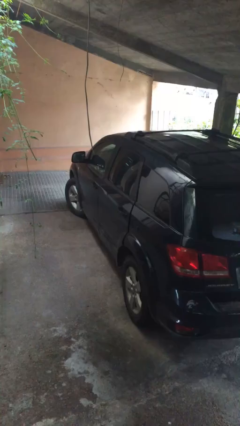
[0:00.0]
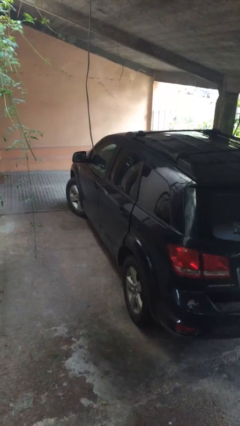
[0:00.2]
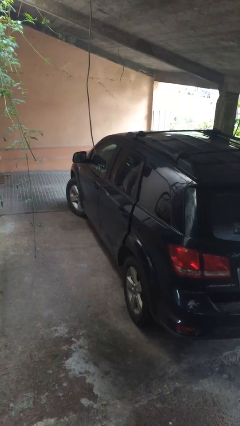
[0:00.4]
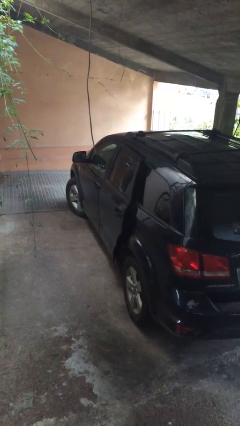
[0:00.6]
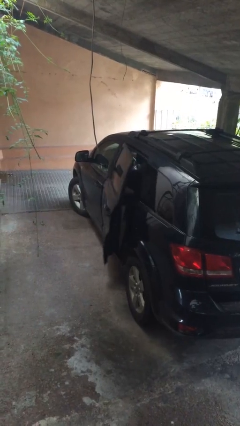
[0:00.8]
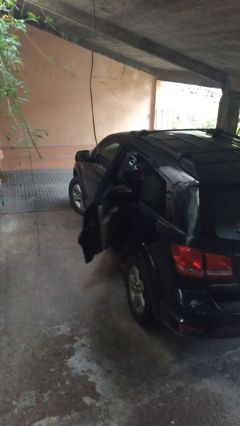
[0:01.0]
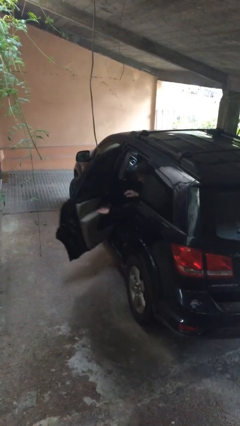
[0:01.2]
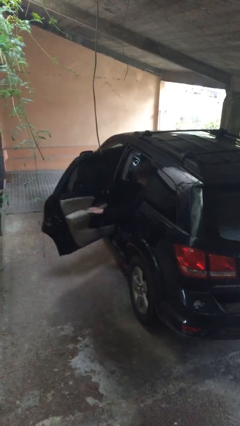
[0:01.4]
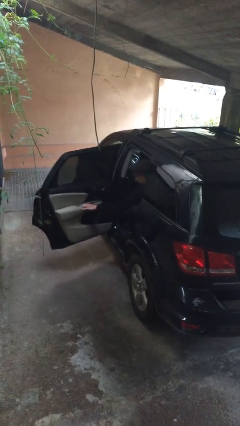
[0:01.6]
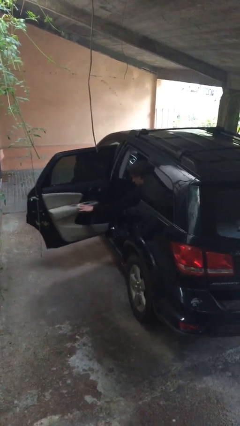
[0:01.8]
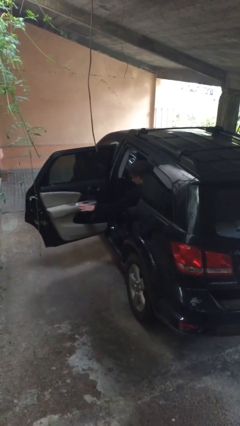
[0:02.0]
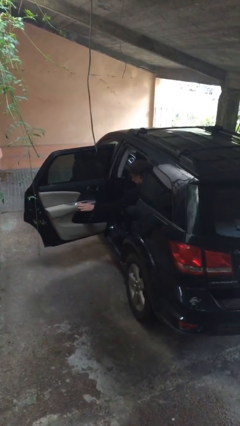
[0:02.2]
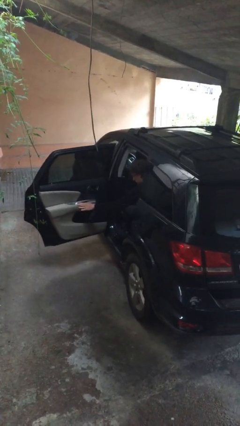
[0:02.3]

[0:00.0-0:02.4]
person opens car door

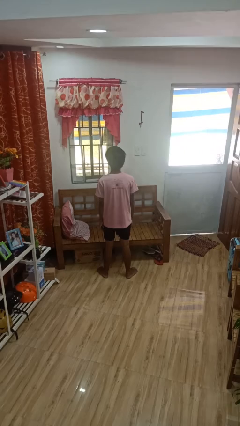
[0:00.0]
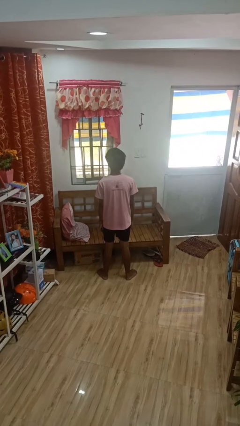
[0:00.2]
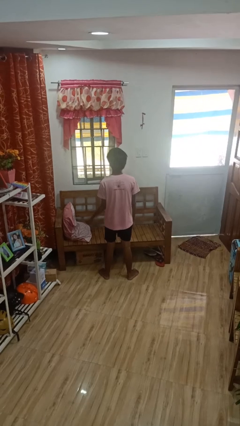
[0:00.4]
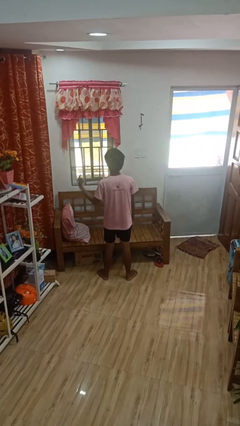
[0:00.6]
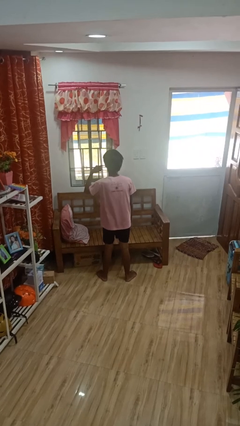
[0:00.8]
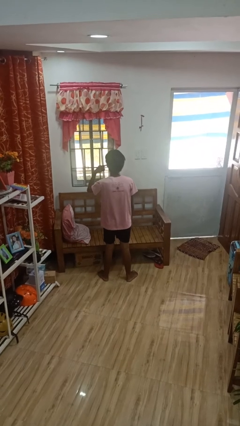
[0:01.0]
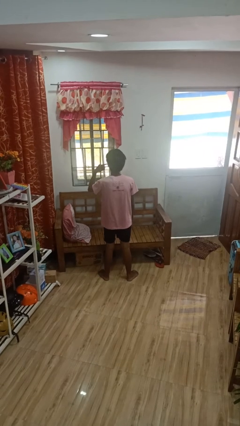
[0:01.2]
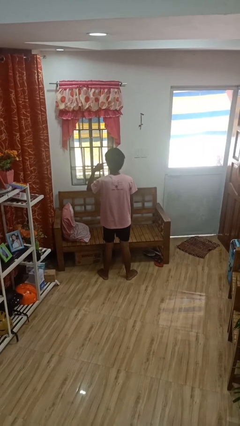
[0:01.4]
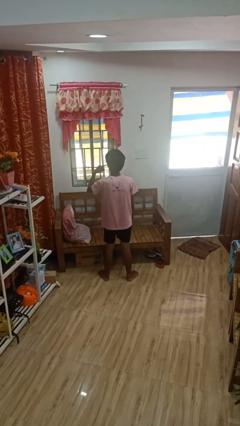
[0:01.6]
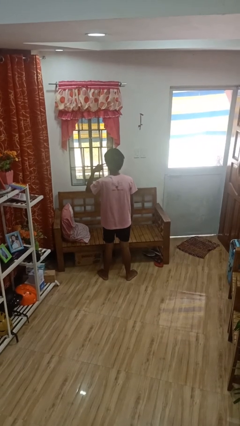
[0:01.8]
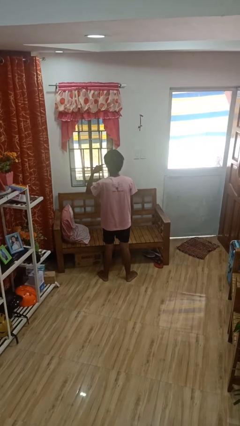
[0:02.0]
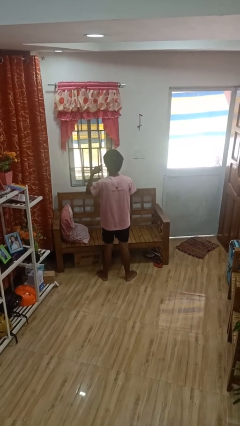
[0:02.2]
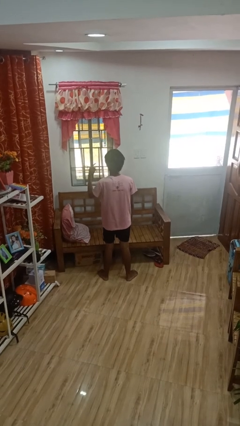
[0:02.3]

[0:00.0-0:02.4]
person gestures listen closely

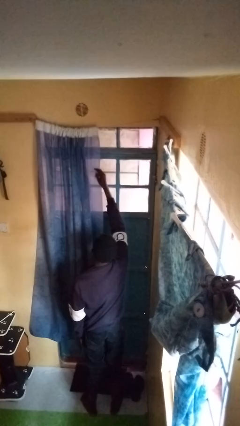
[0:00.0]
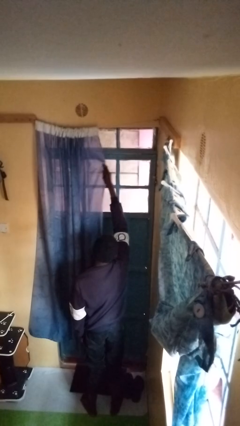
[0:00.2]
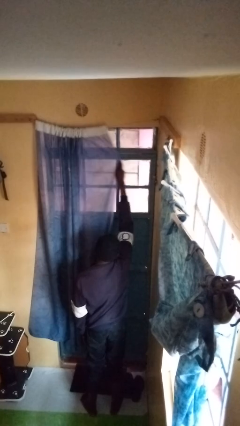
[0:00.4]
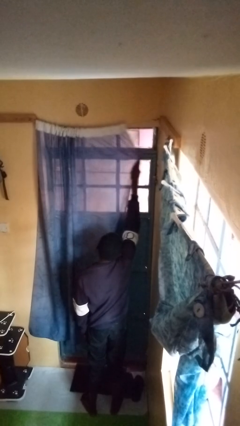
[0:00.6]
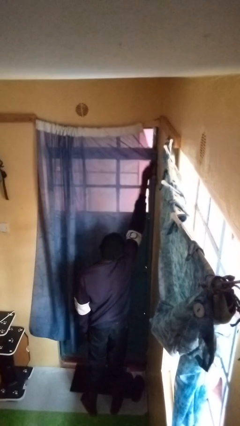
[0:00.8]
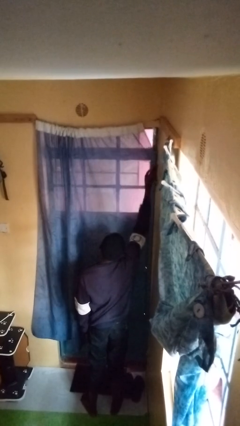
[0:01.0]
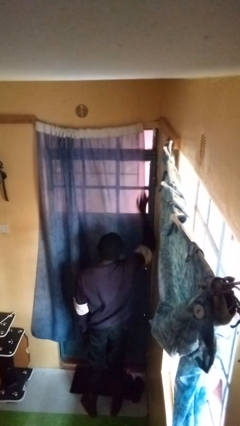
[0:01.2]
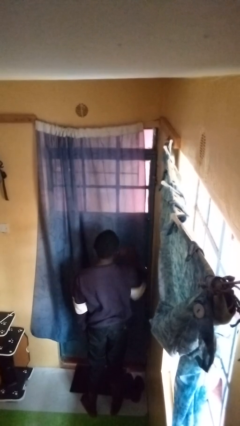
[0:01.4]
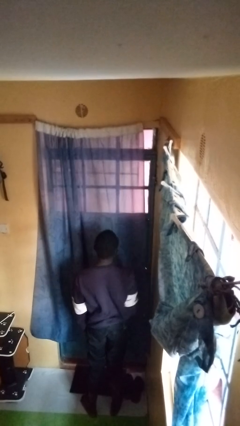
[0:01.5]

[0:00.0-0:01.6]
person closes curtains

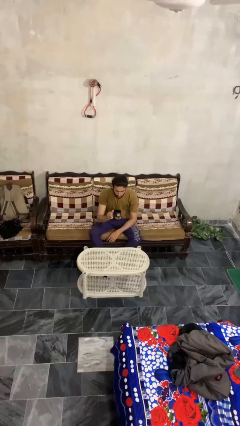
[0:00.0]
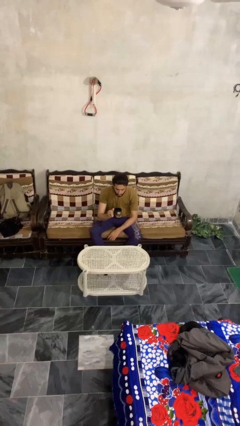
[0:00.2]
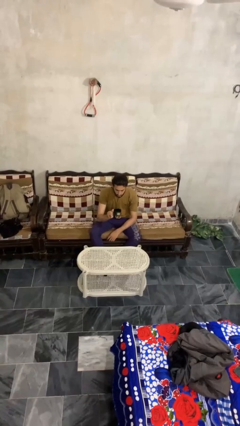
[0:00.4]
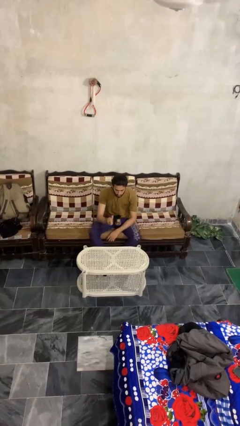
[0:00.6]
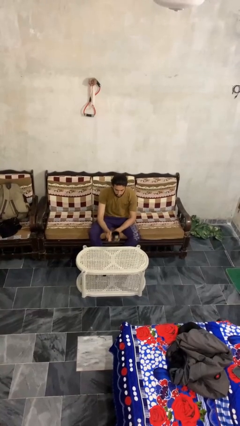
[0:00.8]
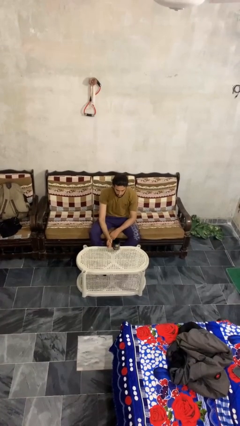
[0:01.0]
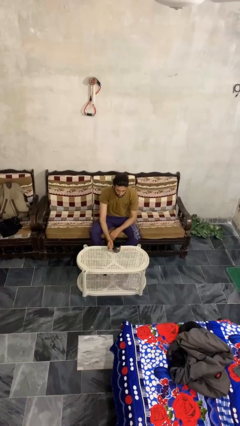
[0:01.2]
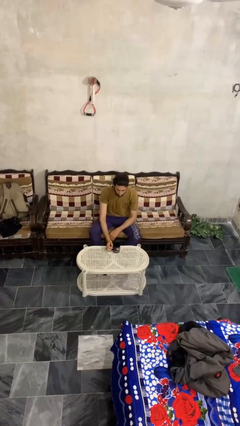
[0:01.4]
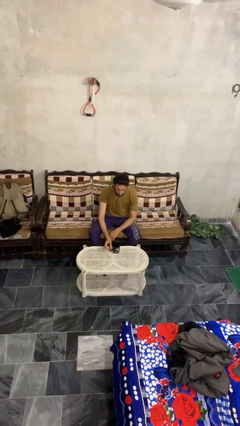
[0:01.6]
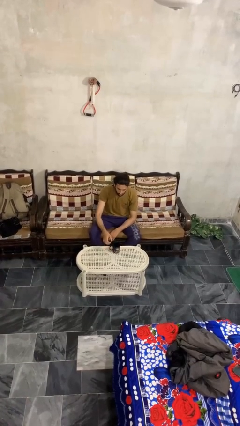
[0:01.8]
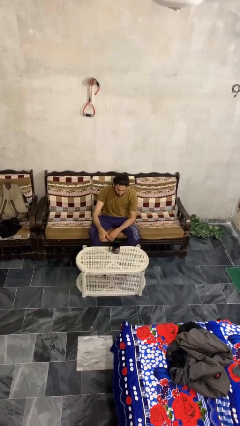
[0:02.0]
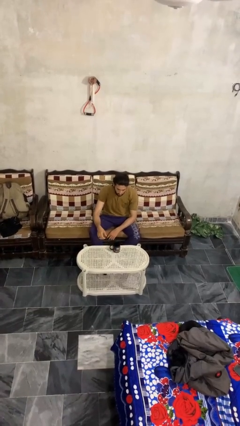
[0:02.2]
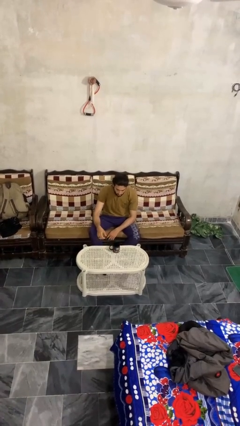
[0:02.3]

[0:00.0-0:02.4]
person puts down object on table

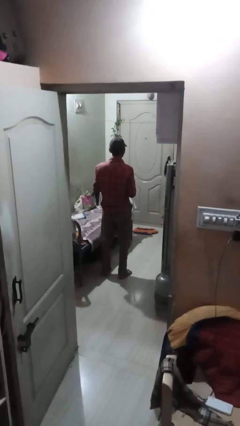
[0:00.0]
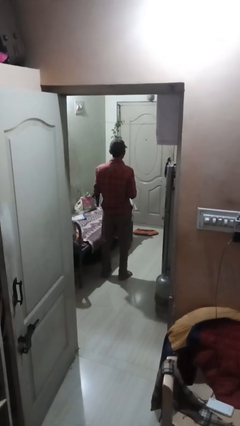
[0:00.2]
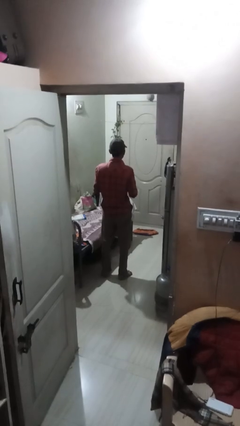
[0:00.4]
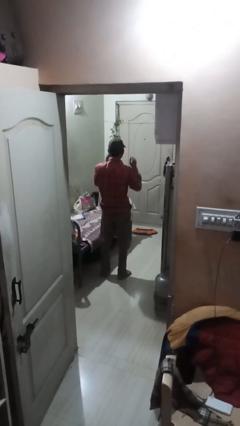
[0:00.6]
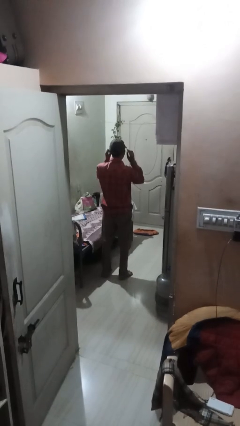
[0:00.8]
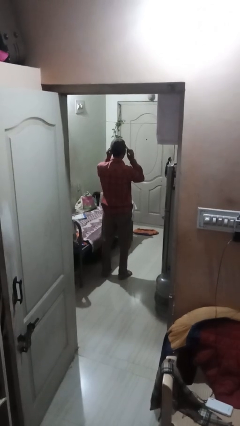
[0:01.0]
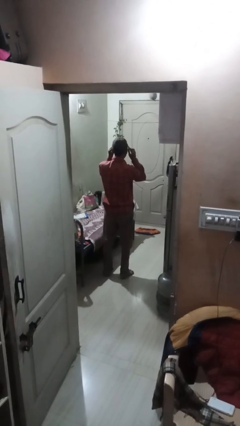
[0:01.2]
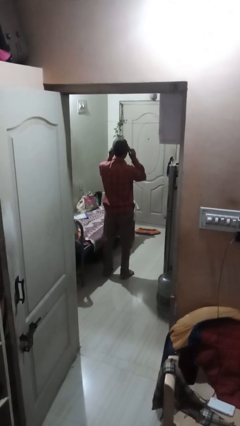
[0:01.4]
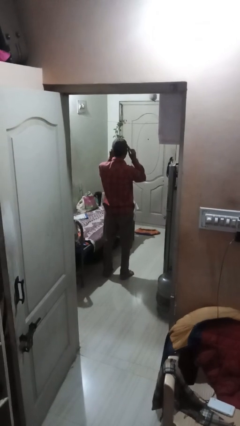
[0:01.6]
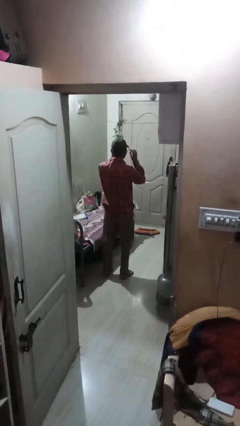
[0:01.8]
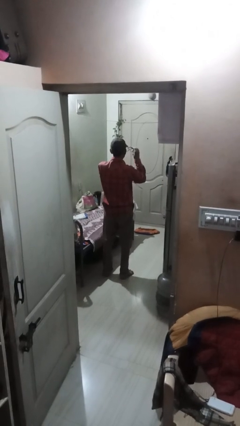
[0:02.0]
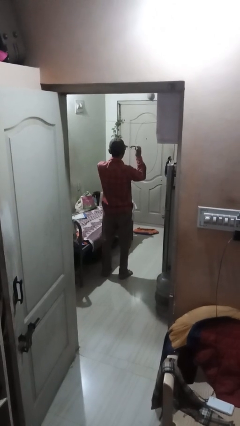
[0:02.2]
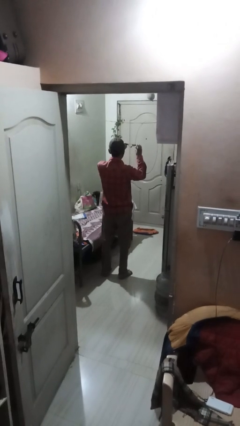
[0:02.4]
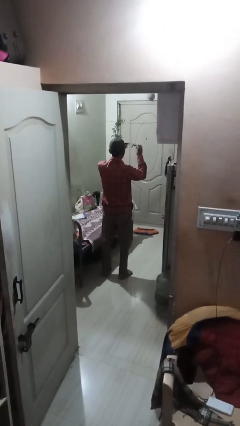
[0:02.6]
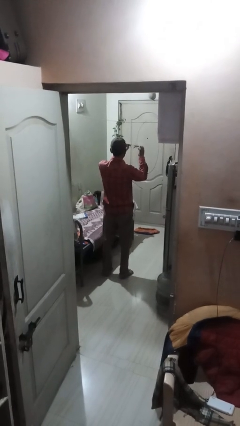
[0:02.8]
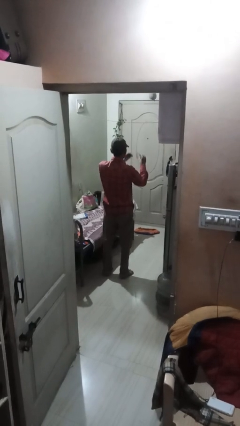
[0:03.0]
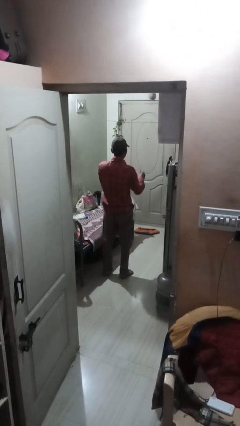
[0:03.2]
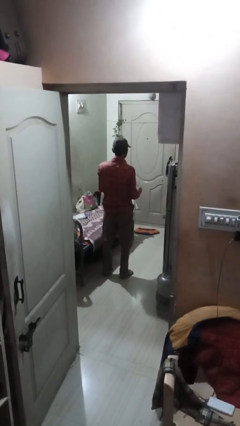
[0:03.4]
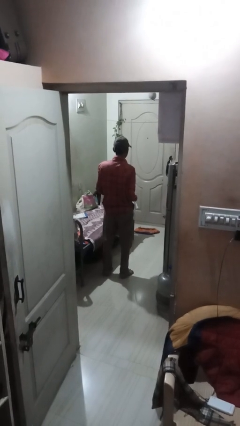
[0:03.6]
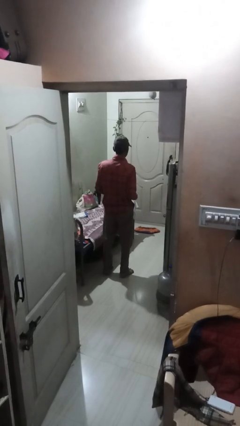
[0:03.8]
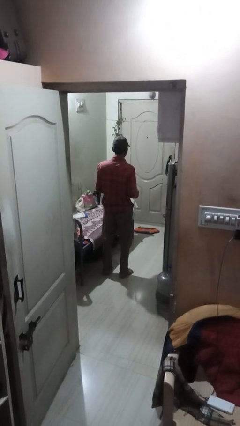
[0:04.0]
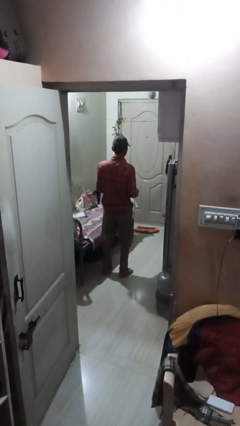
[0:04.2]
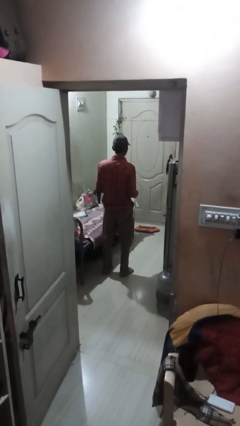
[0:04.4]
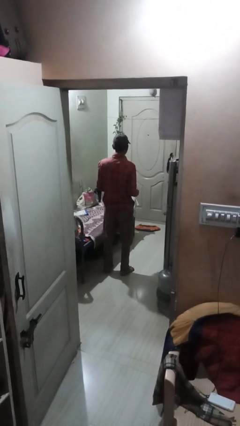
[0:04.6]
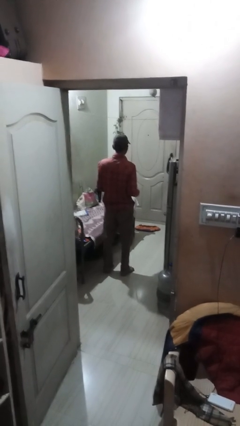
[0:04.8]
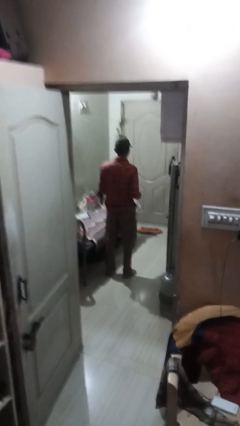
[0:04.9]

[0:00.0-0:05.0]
person takes off glasses

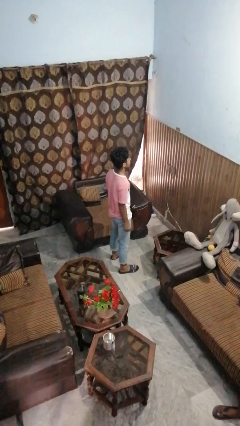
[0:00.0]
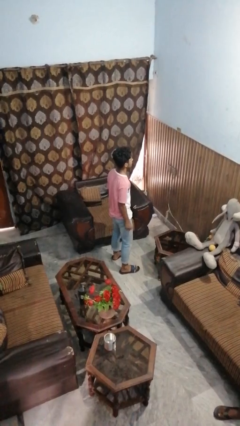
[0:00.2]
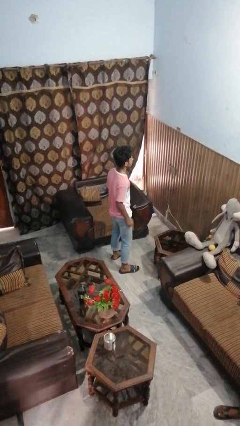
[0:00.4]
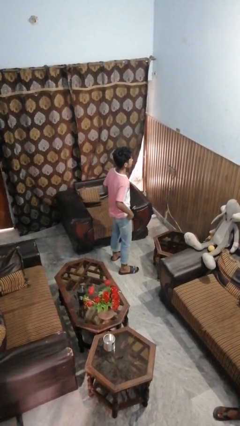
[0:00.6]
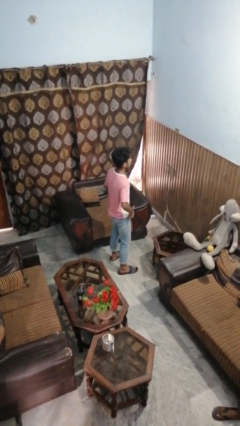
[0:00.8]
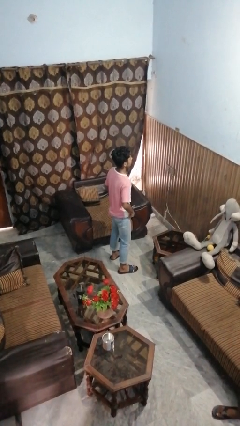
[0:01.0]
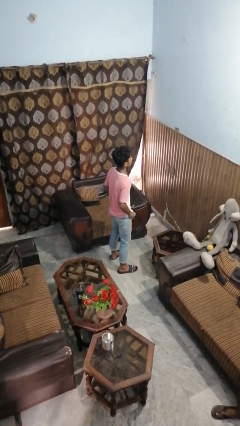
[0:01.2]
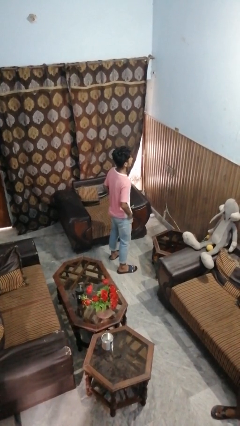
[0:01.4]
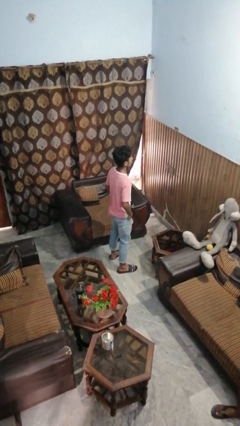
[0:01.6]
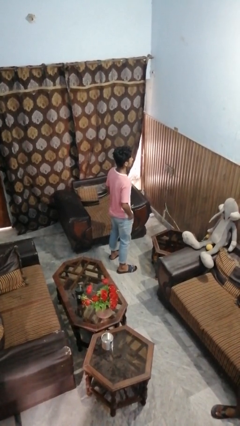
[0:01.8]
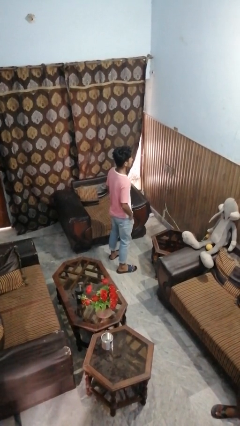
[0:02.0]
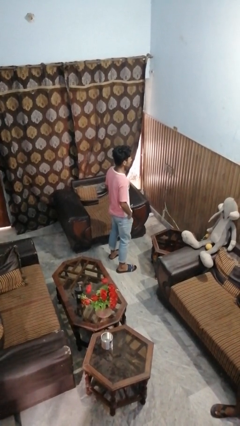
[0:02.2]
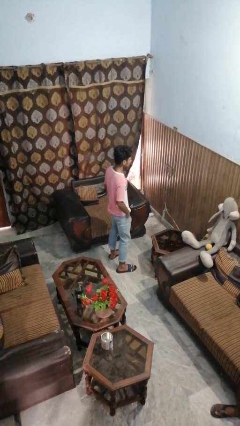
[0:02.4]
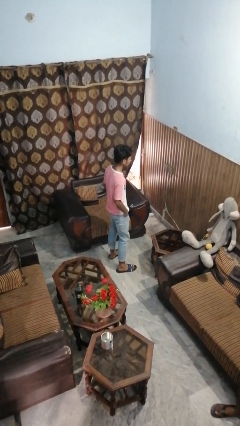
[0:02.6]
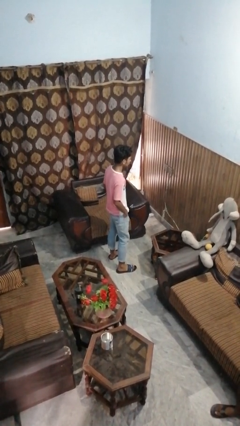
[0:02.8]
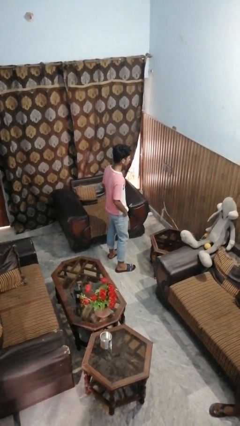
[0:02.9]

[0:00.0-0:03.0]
person puts hands in back pockets

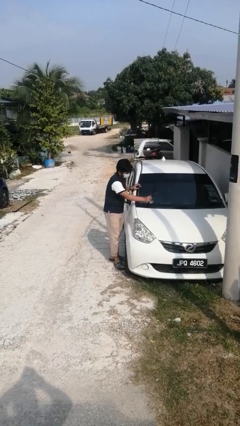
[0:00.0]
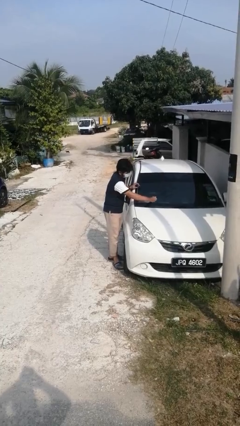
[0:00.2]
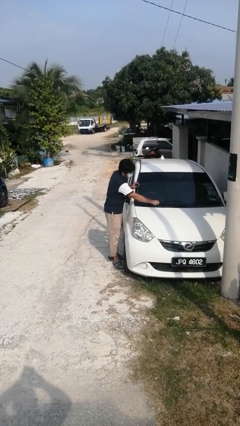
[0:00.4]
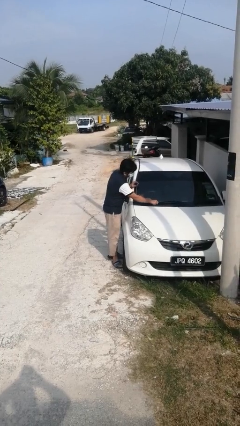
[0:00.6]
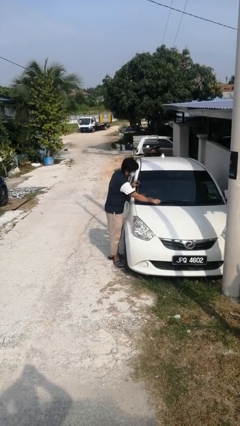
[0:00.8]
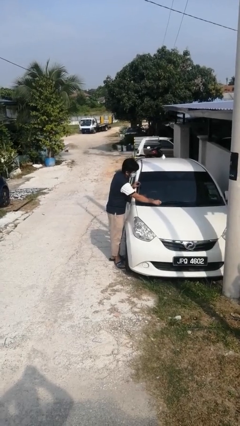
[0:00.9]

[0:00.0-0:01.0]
person flips down car wipers
